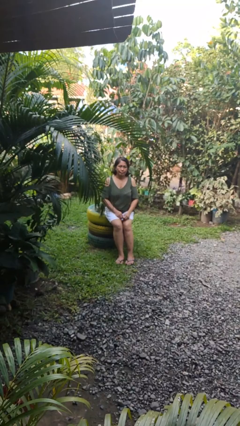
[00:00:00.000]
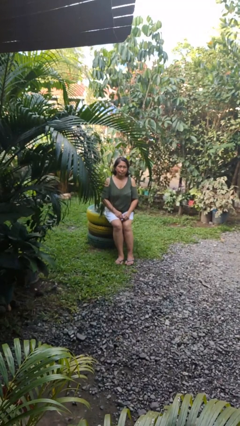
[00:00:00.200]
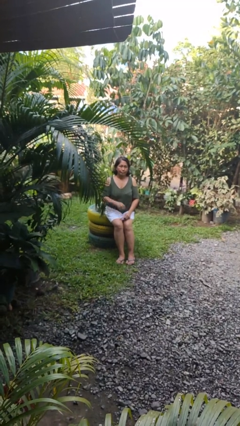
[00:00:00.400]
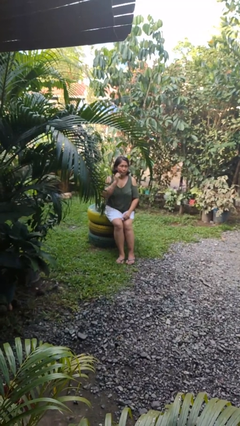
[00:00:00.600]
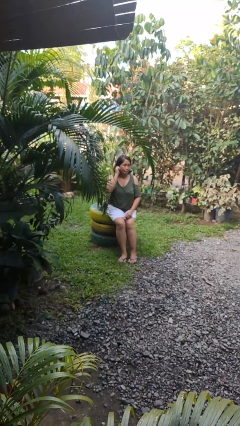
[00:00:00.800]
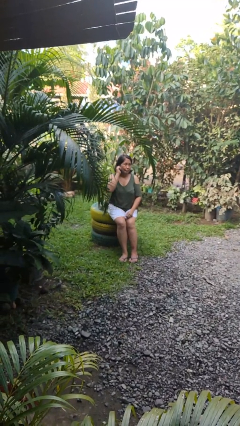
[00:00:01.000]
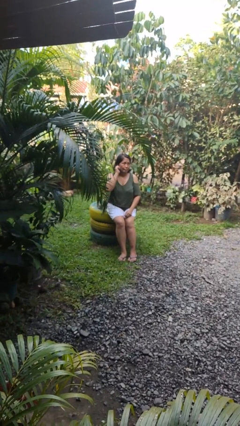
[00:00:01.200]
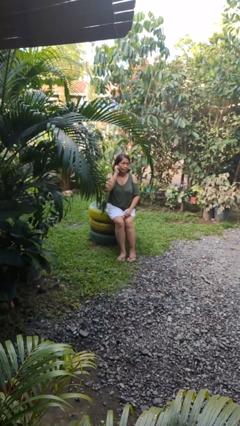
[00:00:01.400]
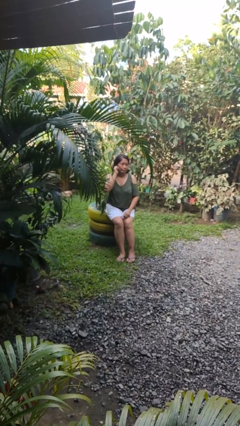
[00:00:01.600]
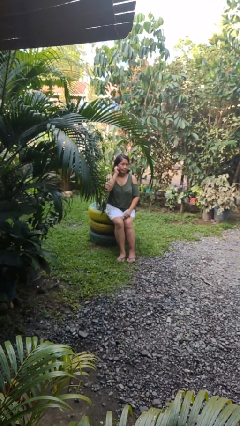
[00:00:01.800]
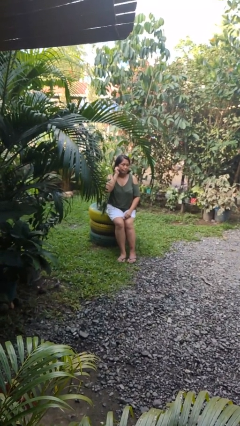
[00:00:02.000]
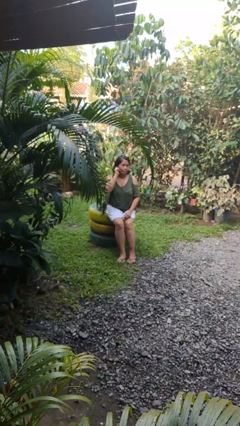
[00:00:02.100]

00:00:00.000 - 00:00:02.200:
person touches earlobe

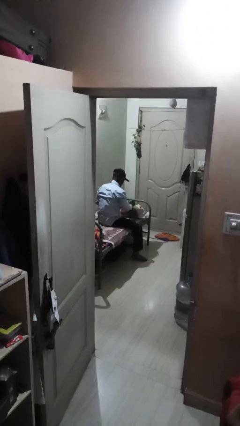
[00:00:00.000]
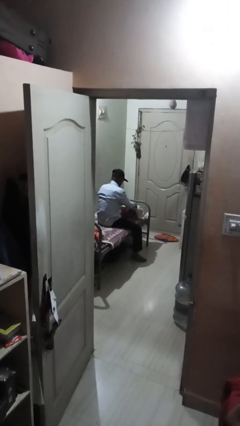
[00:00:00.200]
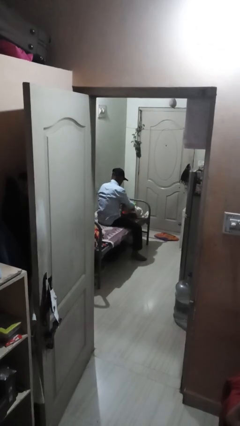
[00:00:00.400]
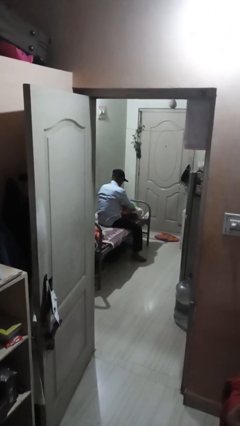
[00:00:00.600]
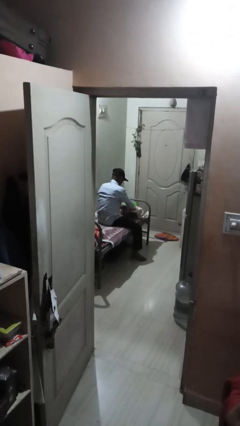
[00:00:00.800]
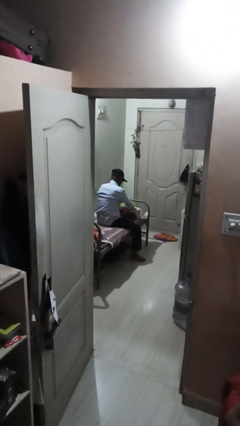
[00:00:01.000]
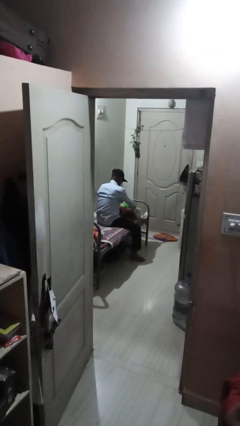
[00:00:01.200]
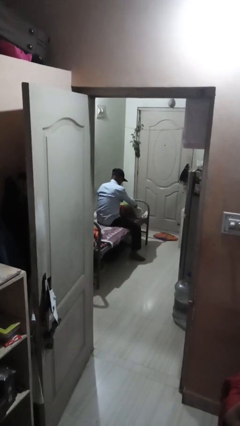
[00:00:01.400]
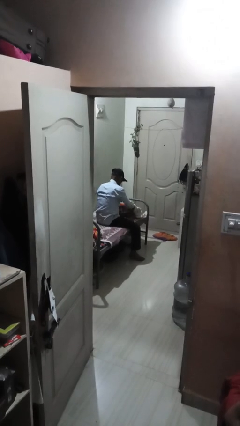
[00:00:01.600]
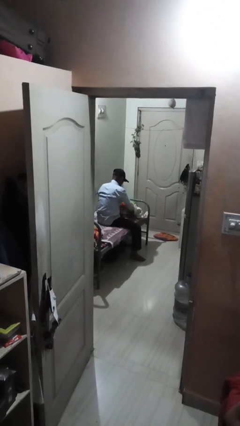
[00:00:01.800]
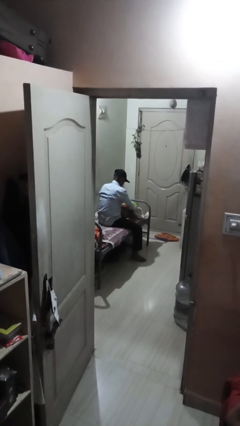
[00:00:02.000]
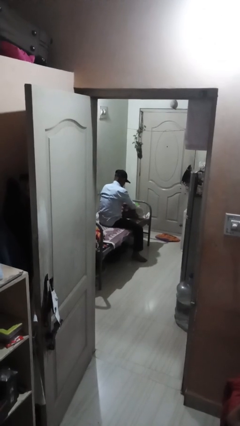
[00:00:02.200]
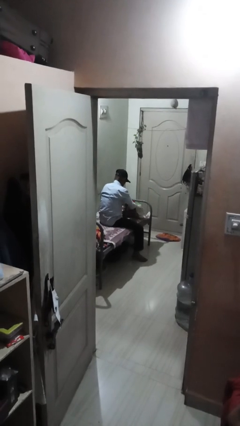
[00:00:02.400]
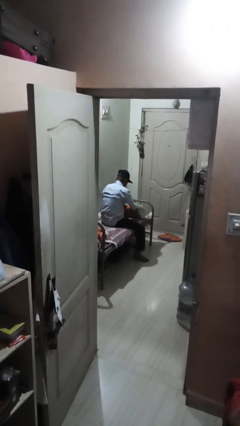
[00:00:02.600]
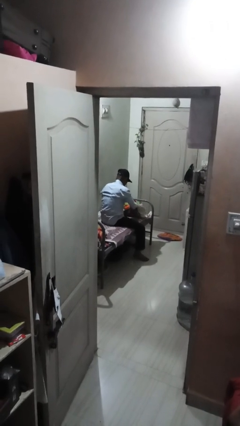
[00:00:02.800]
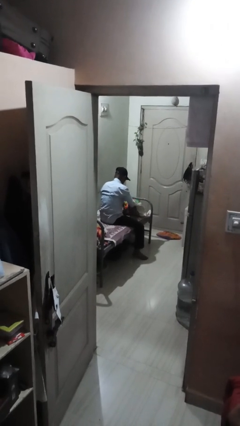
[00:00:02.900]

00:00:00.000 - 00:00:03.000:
person searches in bag

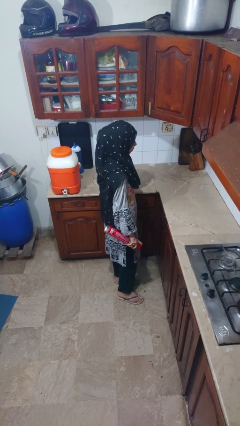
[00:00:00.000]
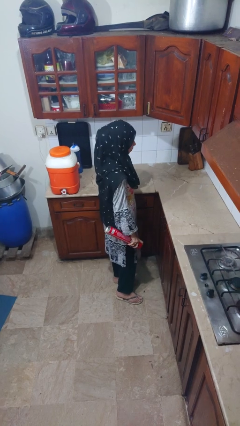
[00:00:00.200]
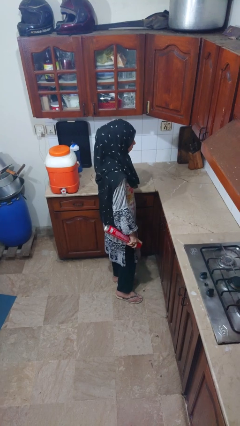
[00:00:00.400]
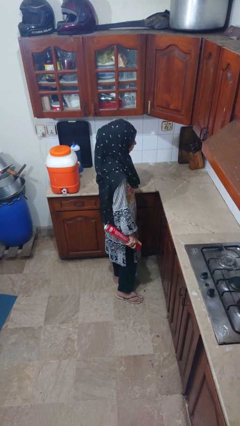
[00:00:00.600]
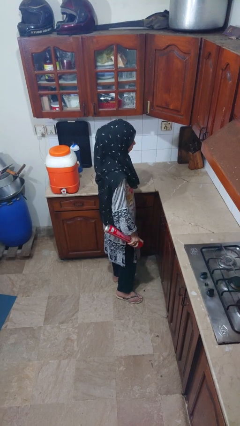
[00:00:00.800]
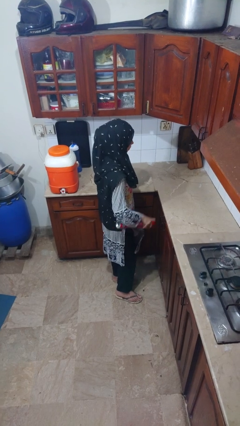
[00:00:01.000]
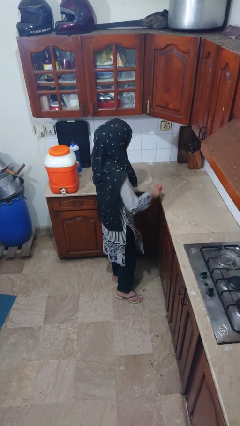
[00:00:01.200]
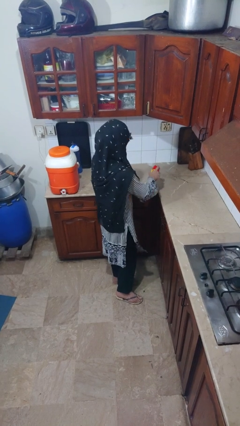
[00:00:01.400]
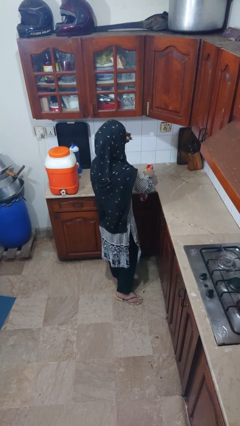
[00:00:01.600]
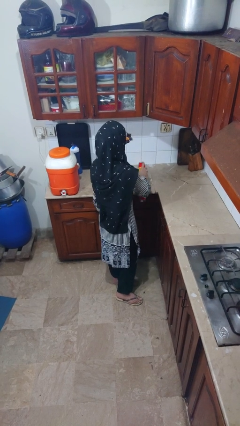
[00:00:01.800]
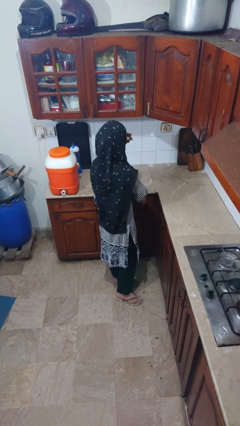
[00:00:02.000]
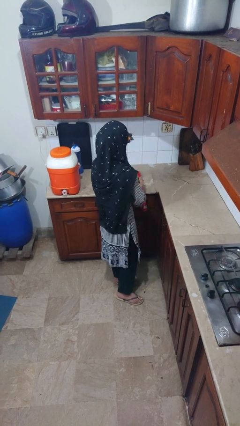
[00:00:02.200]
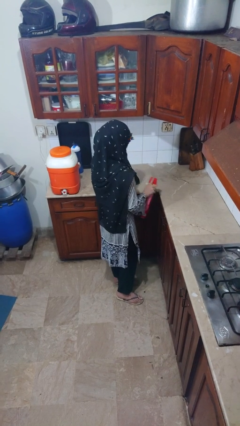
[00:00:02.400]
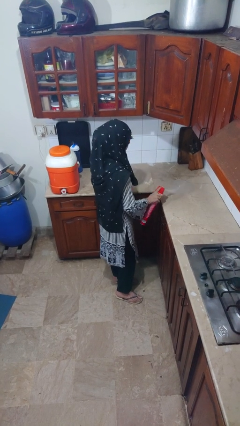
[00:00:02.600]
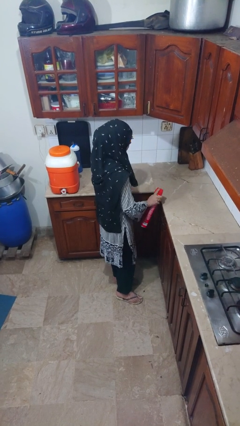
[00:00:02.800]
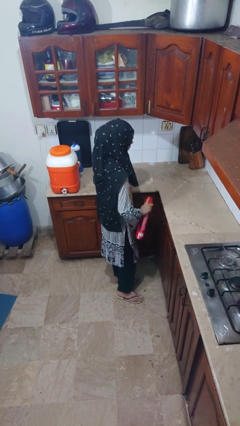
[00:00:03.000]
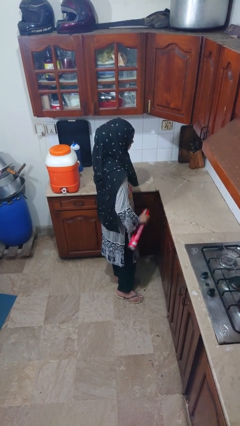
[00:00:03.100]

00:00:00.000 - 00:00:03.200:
person sprays from bottle

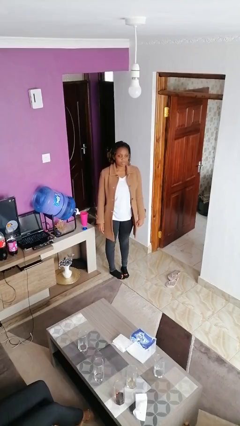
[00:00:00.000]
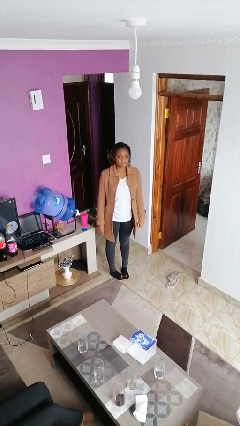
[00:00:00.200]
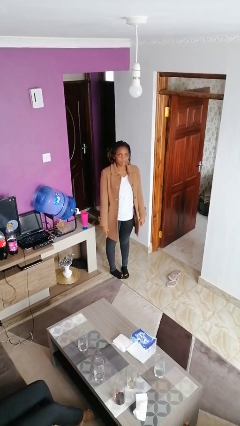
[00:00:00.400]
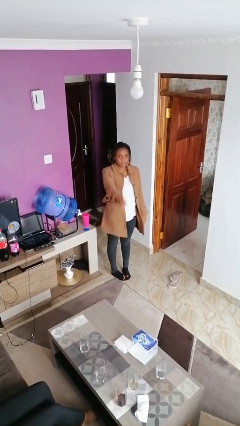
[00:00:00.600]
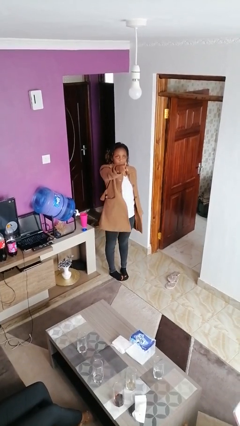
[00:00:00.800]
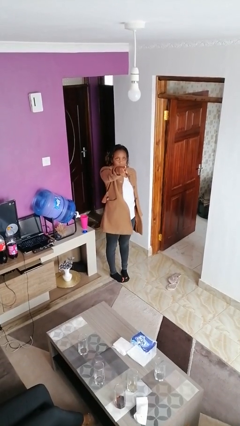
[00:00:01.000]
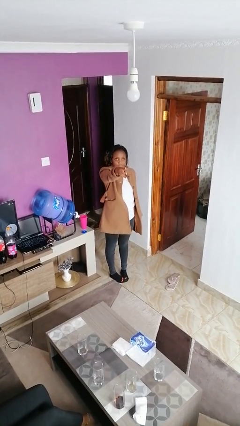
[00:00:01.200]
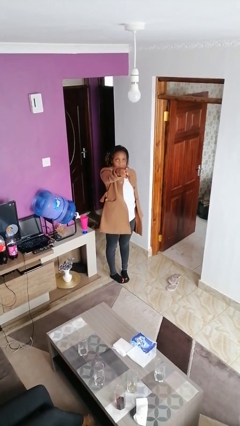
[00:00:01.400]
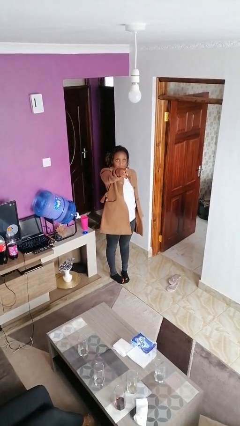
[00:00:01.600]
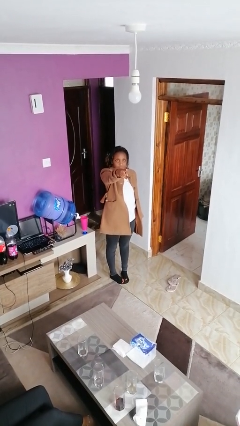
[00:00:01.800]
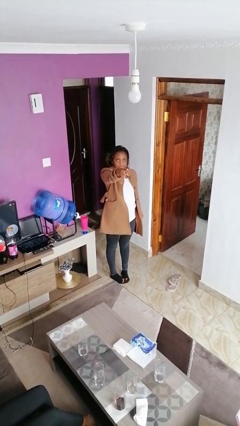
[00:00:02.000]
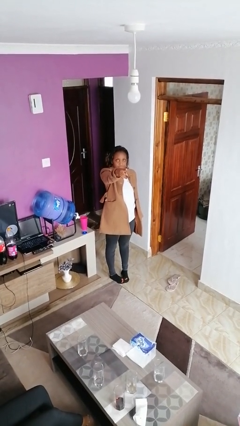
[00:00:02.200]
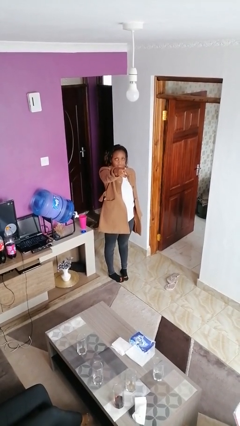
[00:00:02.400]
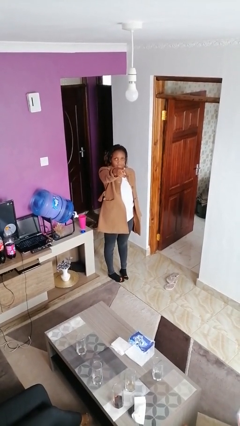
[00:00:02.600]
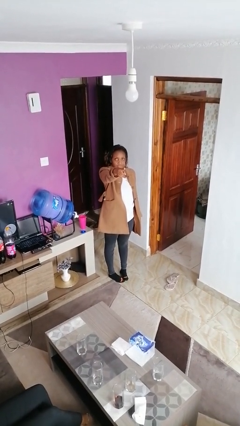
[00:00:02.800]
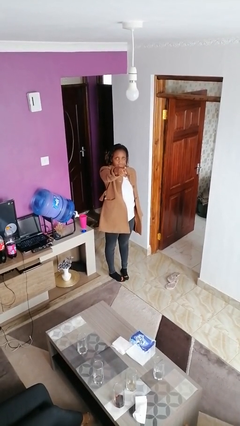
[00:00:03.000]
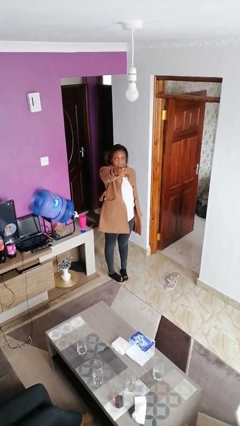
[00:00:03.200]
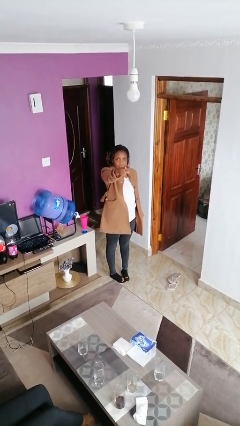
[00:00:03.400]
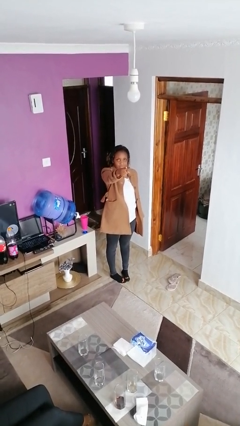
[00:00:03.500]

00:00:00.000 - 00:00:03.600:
person points at person

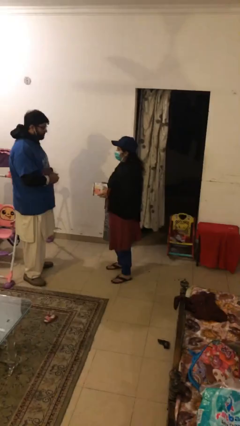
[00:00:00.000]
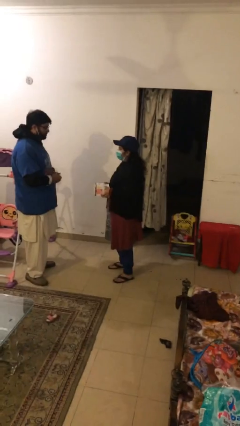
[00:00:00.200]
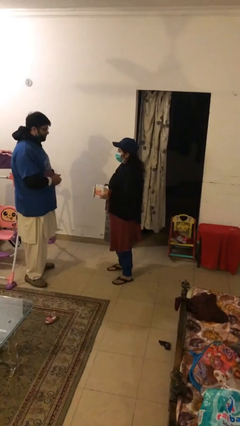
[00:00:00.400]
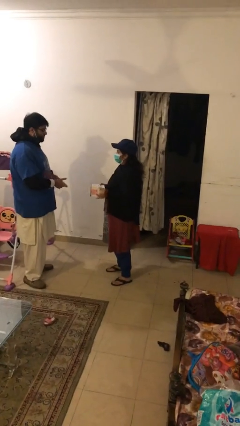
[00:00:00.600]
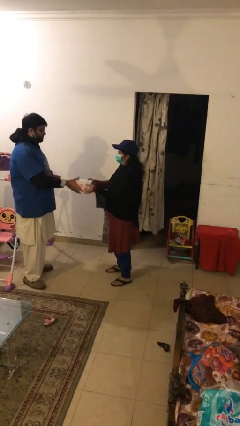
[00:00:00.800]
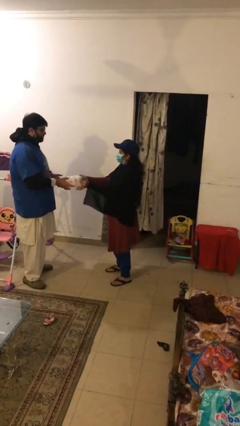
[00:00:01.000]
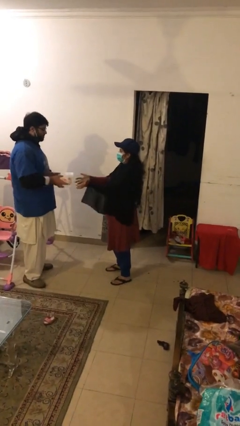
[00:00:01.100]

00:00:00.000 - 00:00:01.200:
person transfers object to person

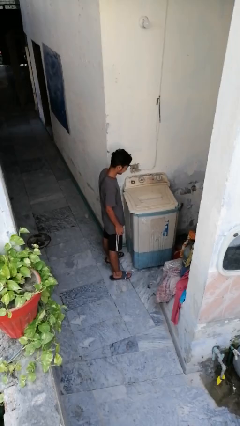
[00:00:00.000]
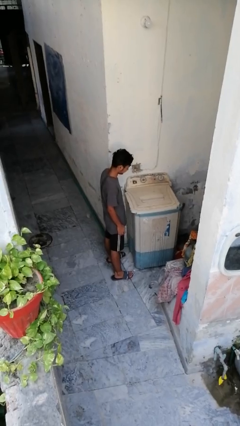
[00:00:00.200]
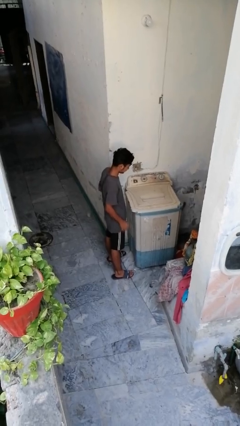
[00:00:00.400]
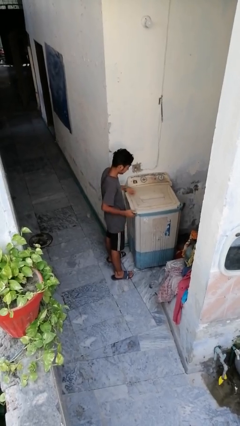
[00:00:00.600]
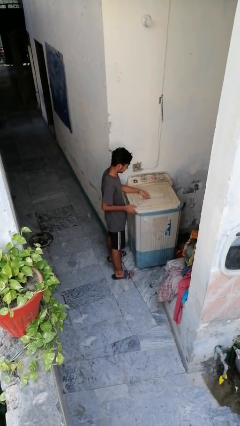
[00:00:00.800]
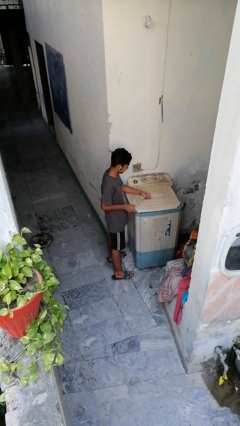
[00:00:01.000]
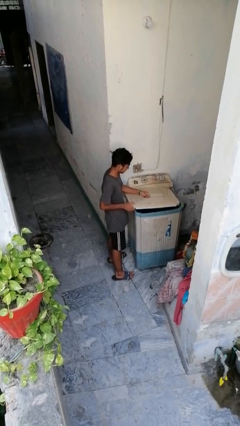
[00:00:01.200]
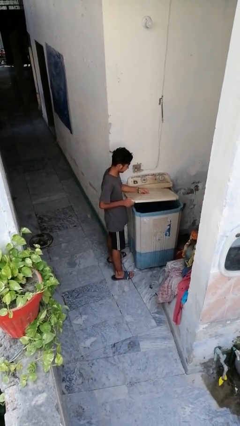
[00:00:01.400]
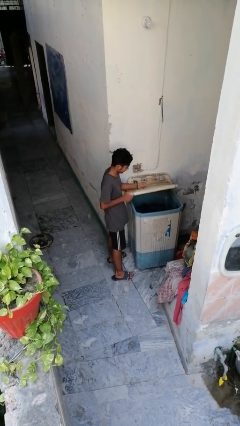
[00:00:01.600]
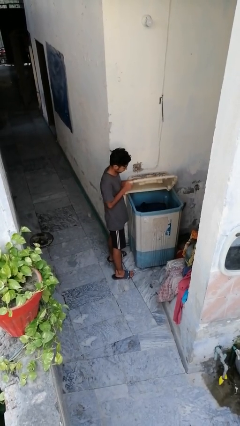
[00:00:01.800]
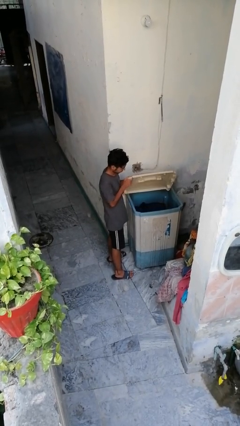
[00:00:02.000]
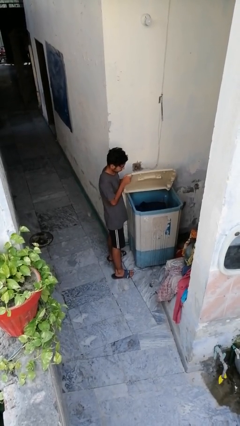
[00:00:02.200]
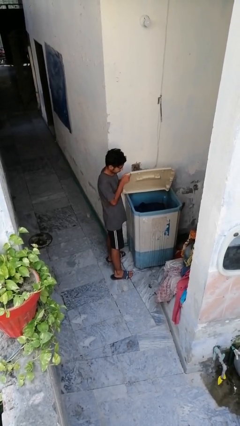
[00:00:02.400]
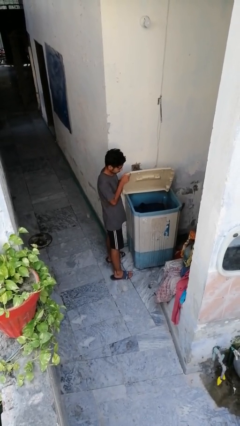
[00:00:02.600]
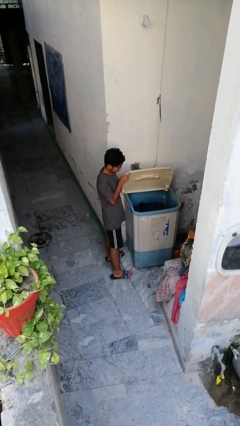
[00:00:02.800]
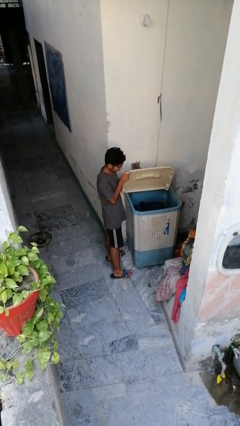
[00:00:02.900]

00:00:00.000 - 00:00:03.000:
person opens clothes washer

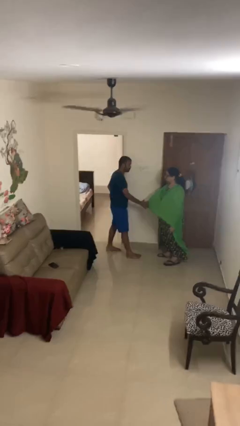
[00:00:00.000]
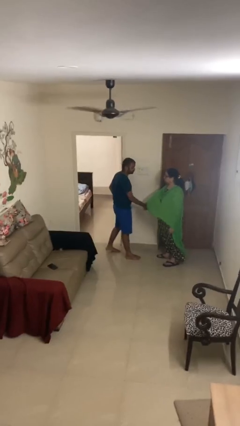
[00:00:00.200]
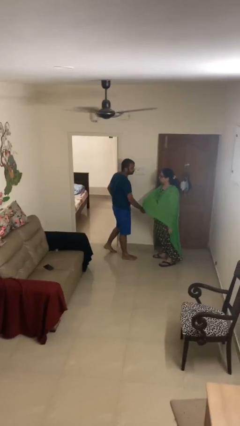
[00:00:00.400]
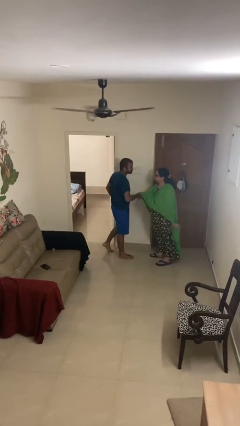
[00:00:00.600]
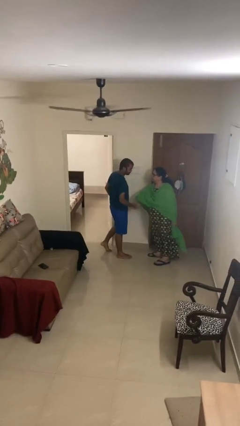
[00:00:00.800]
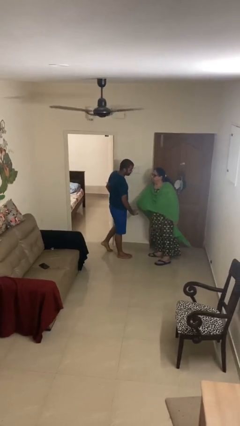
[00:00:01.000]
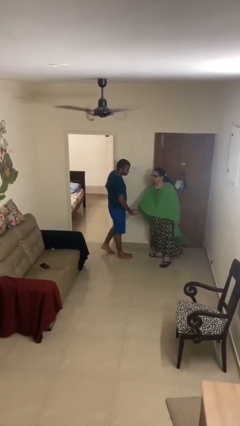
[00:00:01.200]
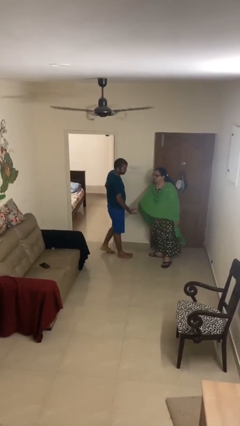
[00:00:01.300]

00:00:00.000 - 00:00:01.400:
person shakes hand
